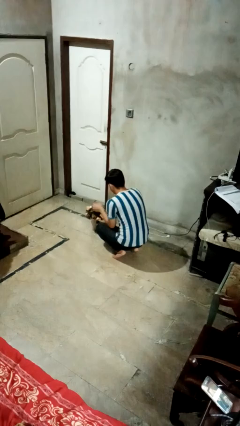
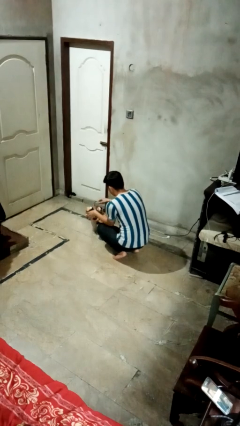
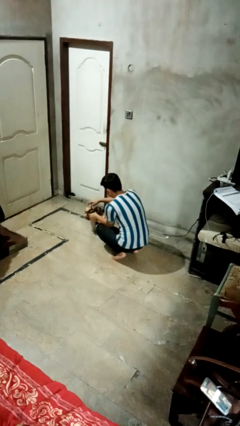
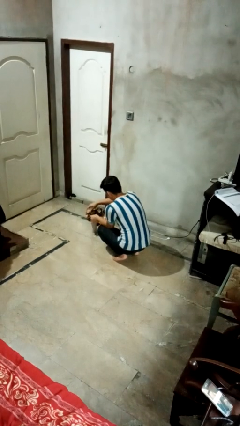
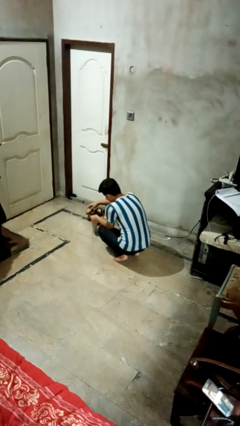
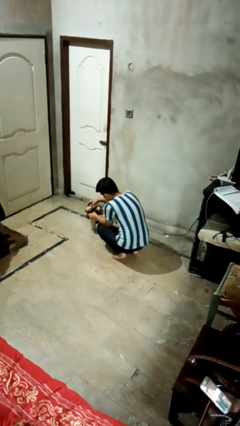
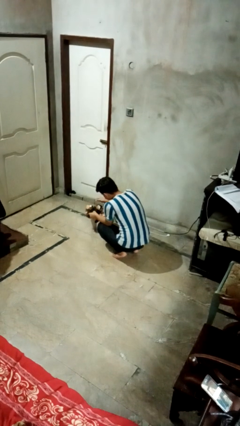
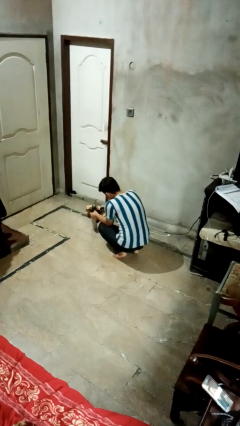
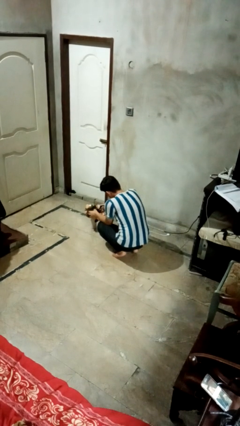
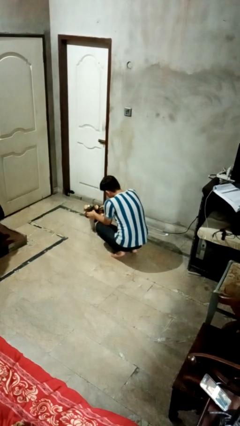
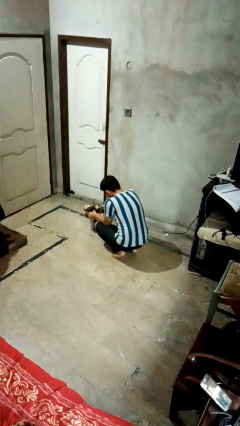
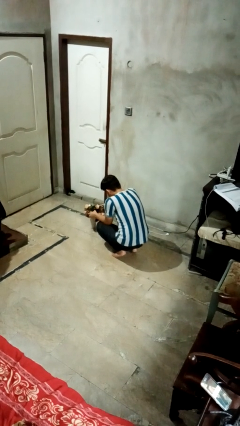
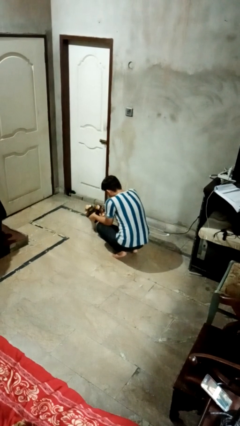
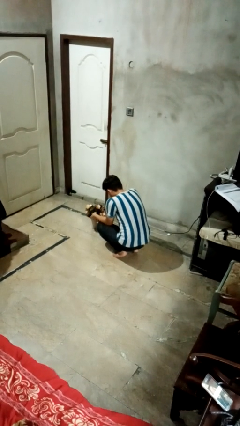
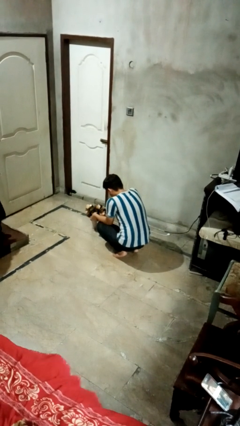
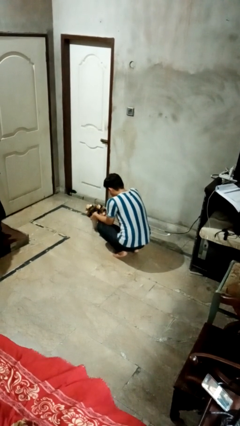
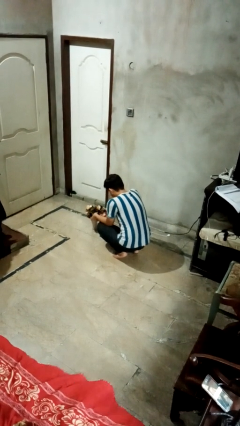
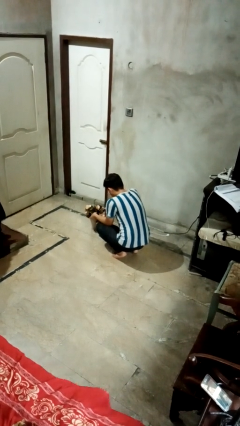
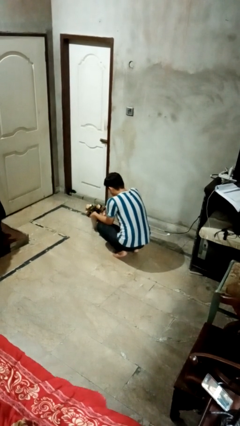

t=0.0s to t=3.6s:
person arranges flowers in vase

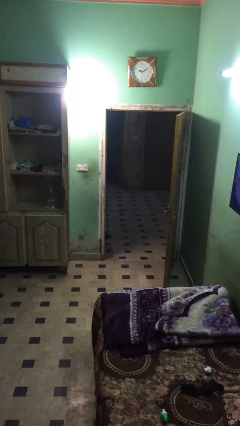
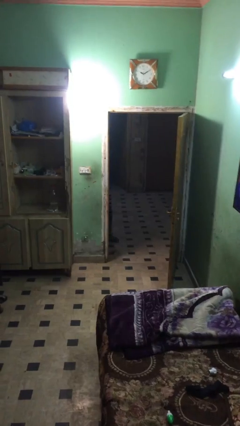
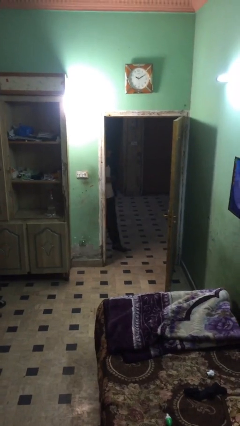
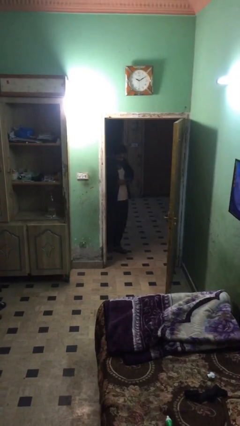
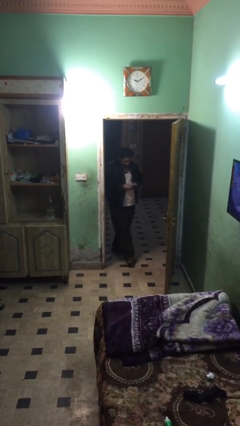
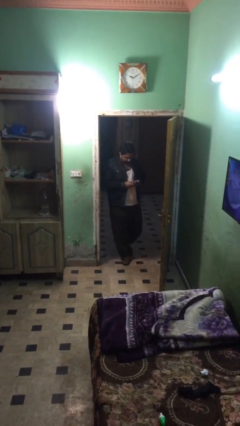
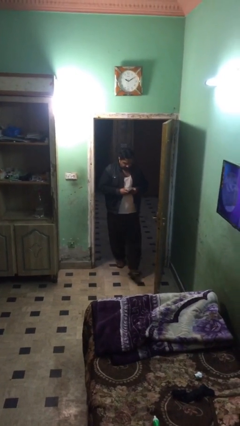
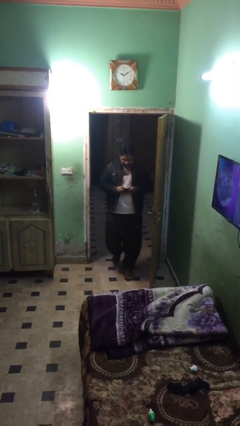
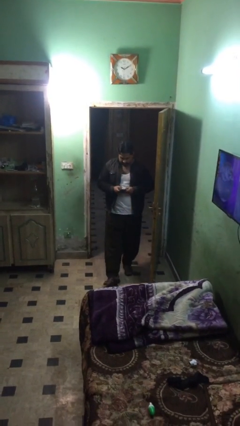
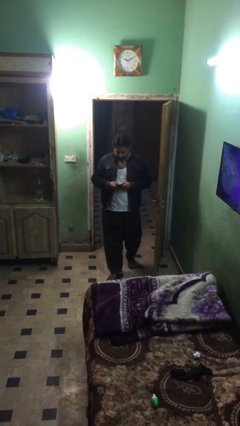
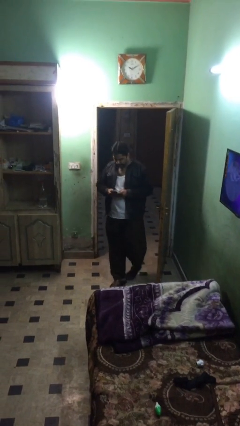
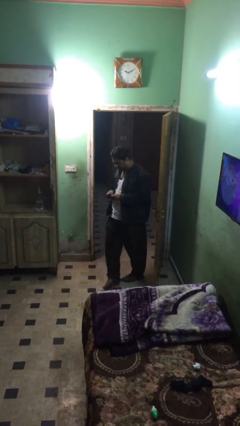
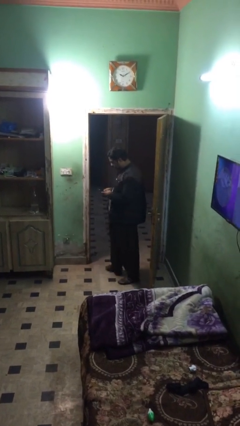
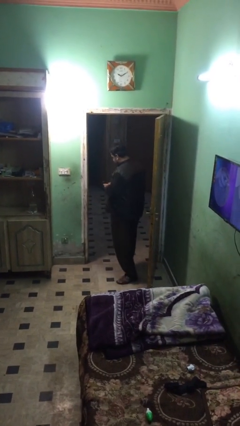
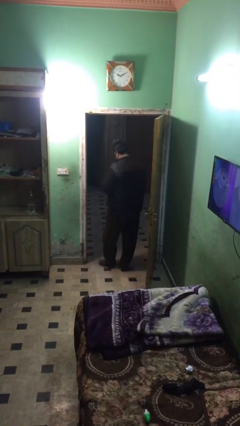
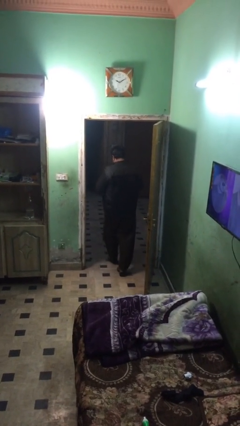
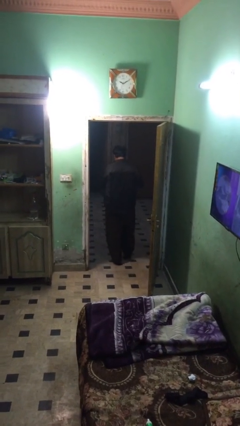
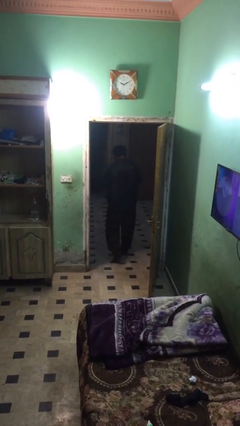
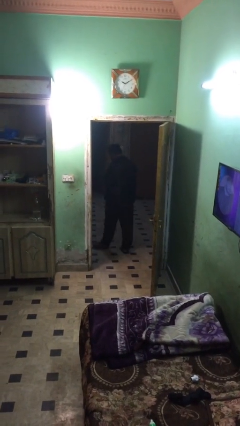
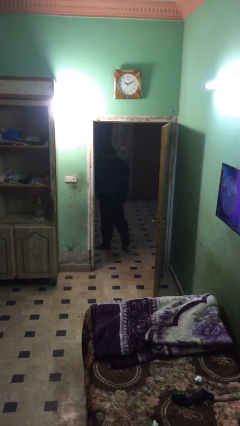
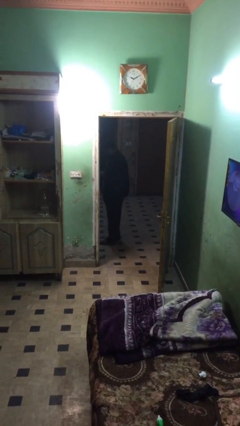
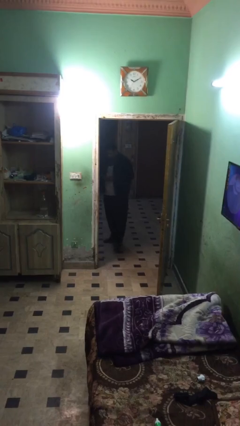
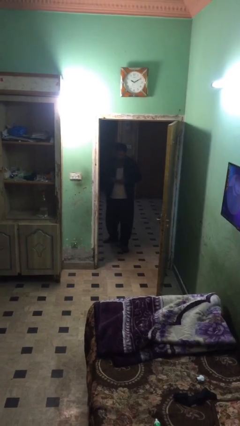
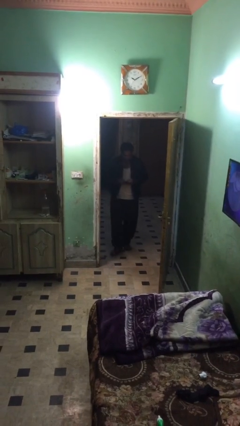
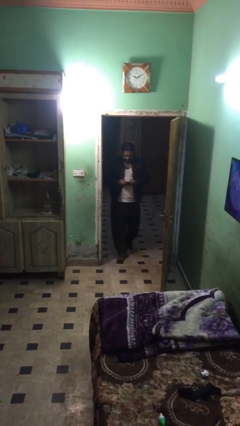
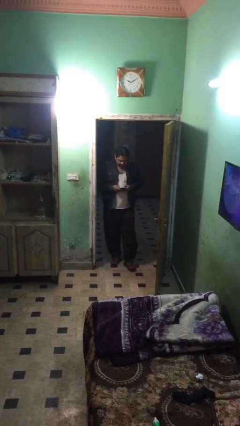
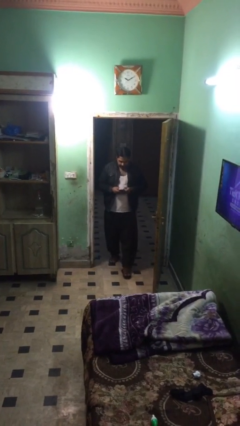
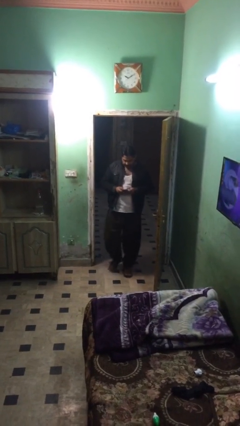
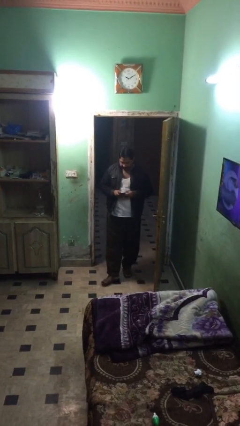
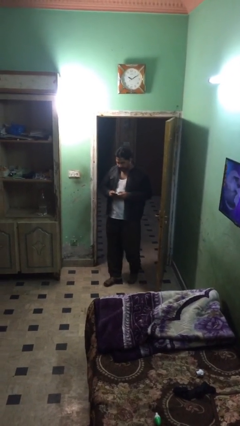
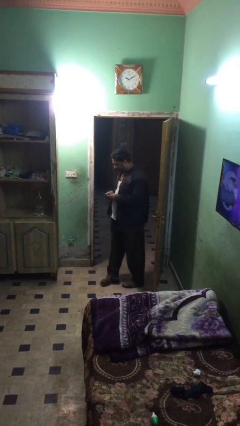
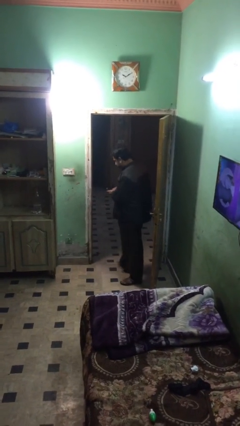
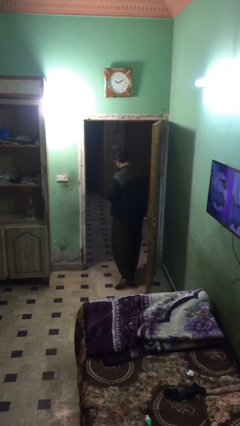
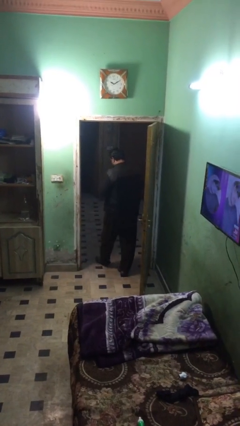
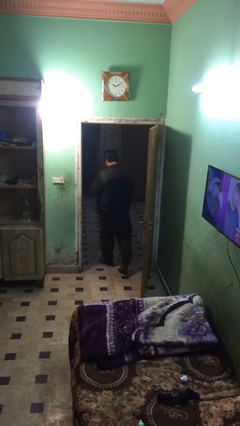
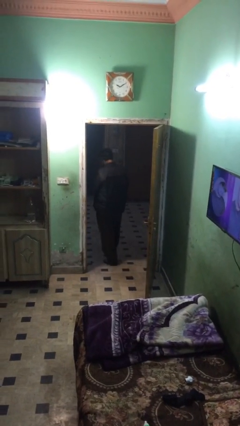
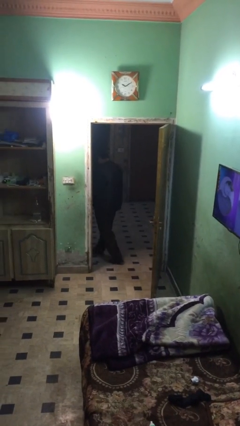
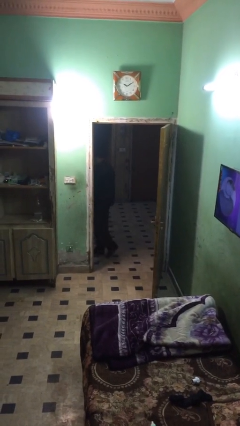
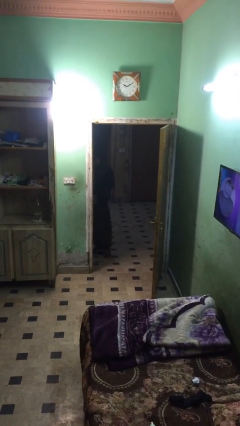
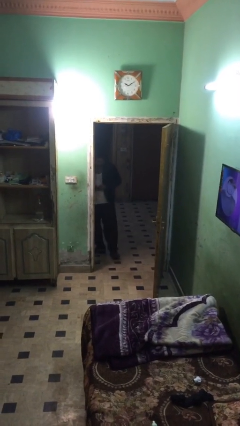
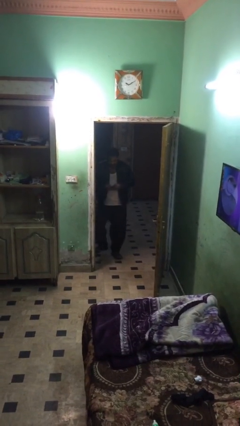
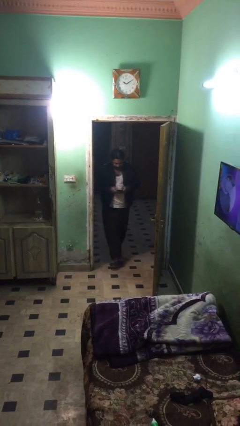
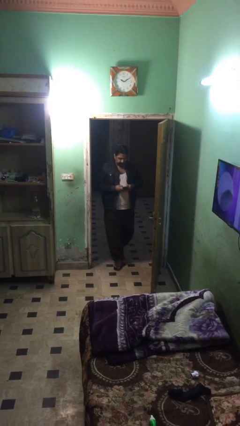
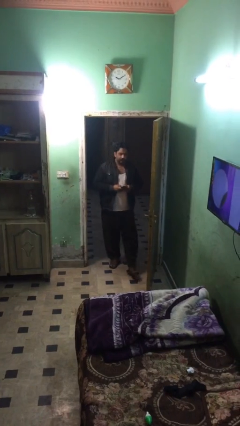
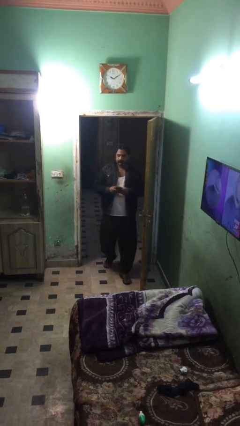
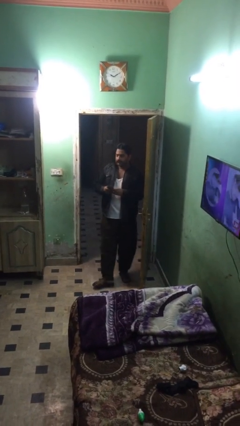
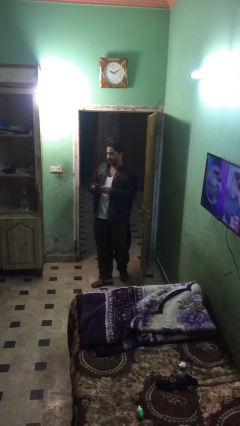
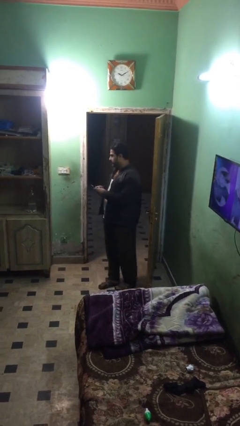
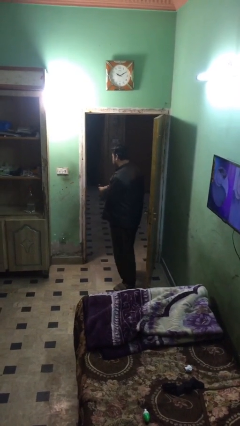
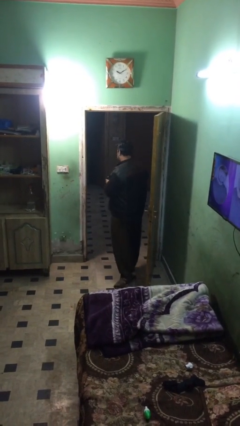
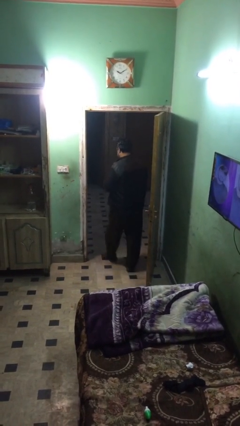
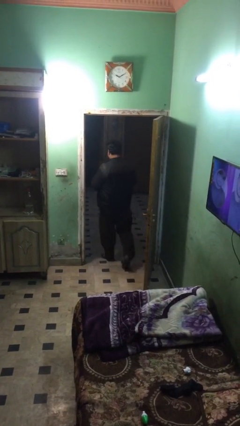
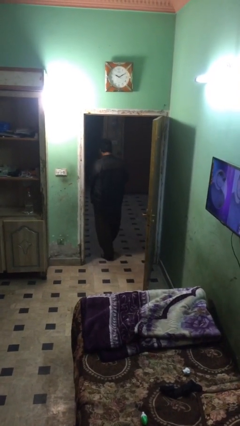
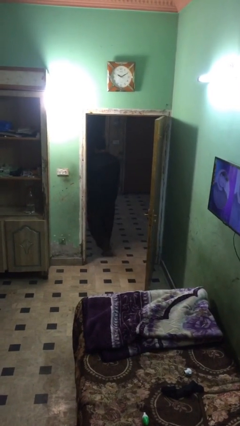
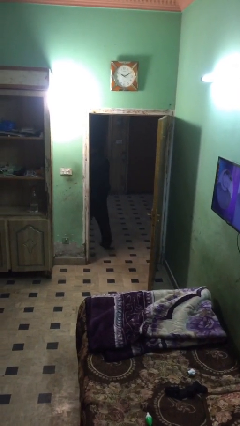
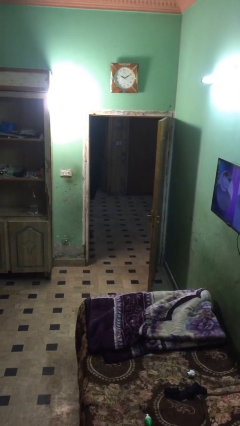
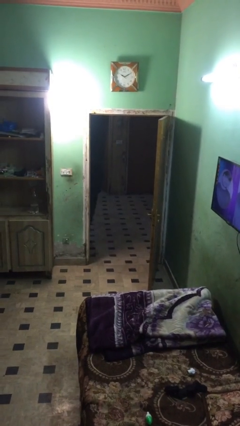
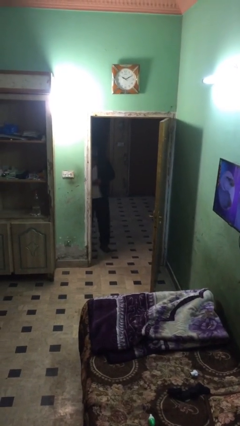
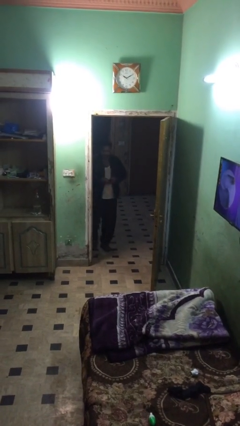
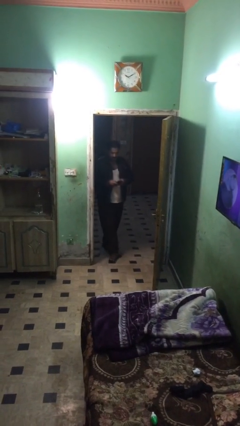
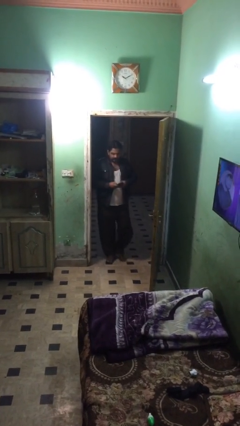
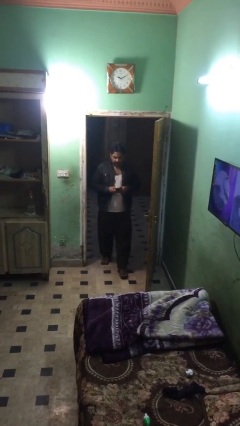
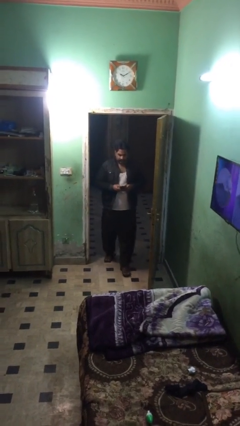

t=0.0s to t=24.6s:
person texts on phone

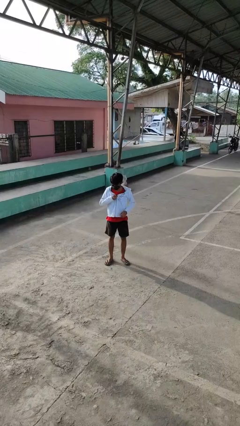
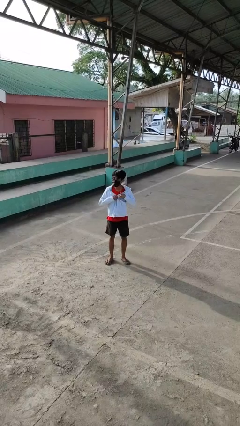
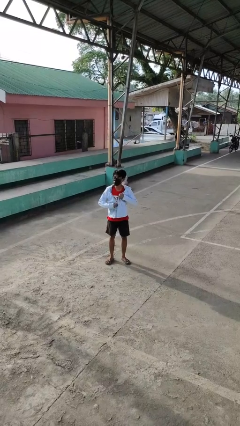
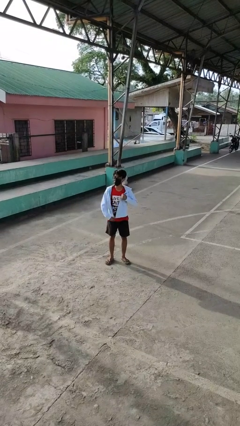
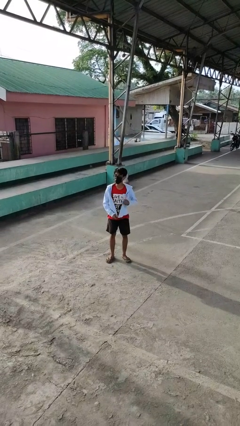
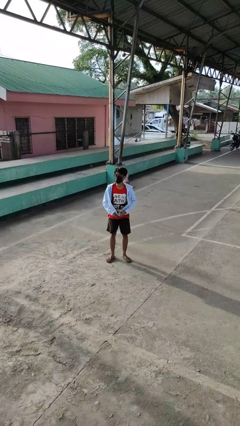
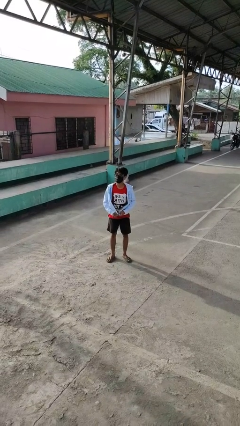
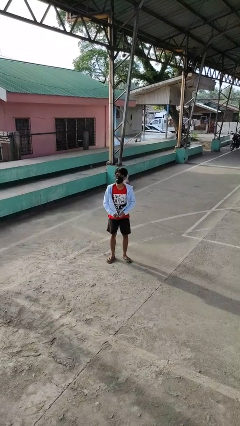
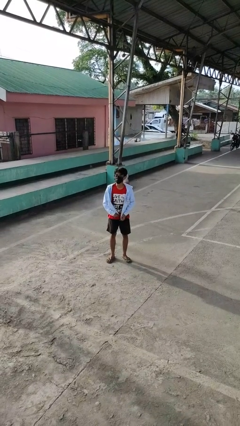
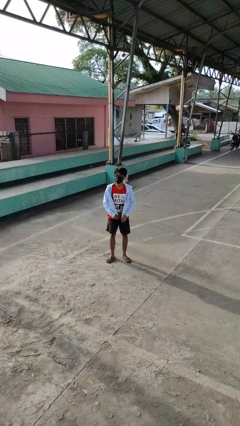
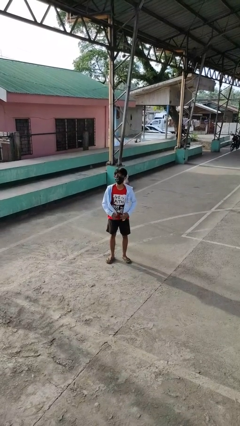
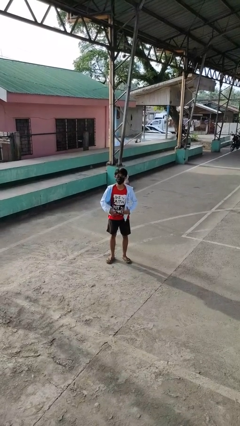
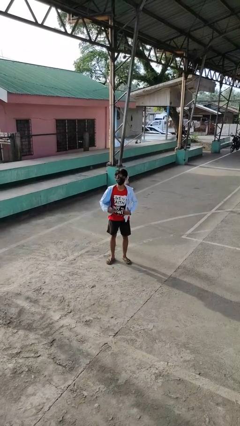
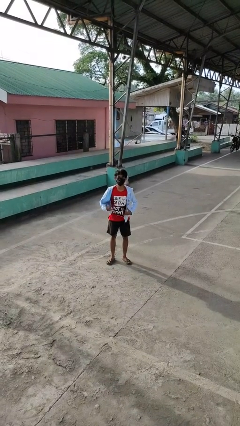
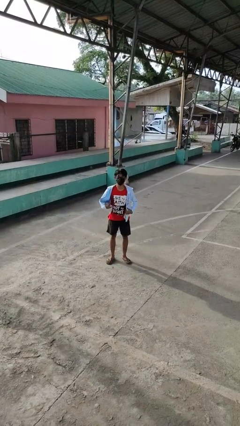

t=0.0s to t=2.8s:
person unzips jacket
